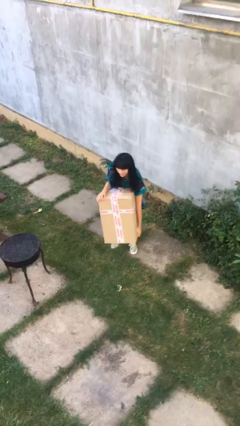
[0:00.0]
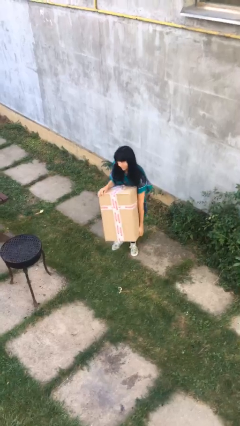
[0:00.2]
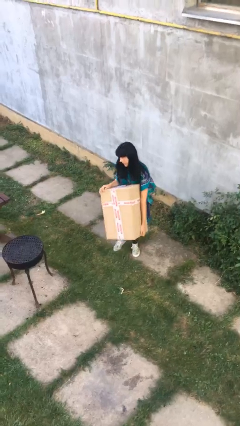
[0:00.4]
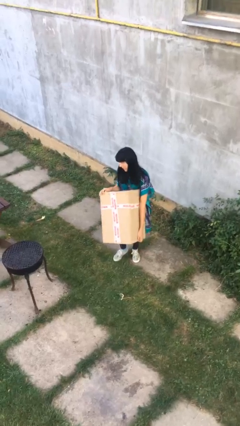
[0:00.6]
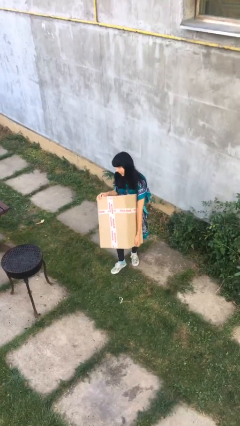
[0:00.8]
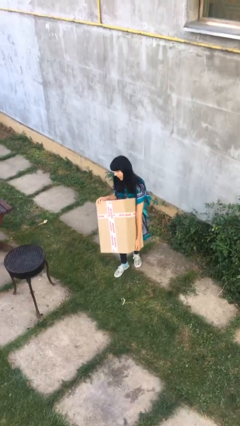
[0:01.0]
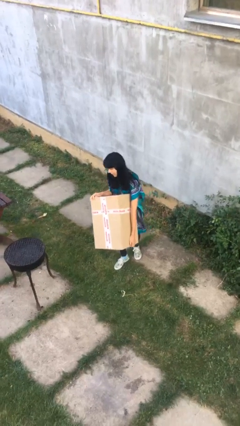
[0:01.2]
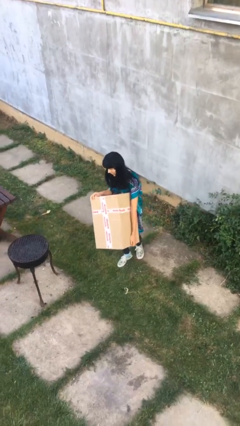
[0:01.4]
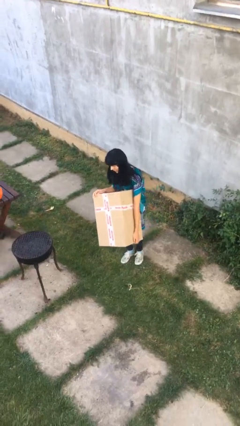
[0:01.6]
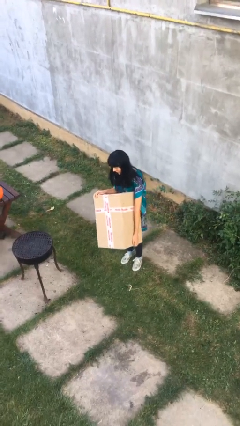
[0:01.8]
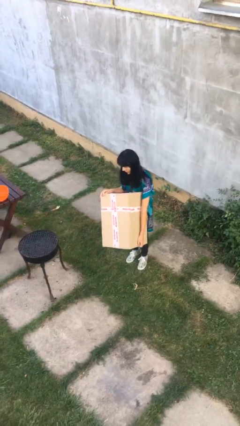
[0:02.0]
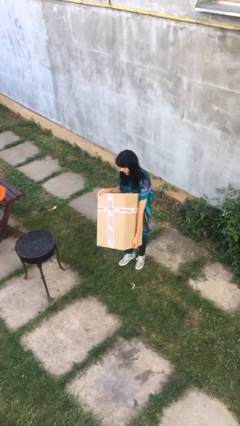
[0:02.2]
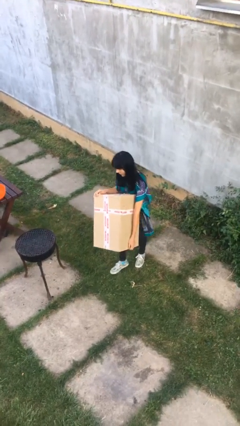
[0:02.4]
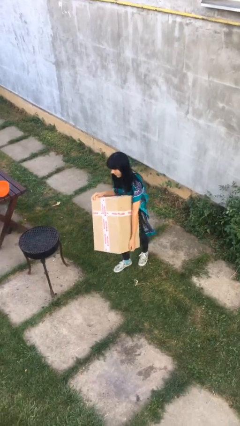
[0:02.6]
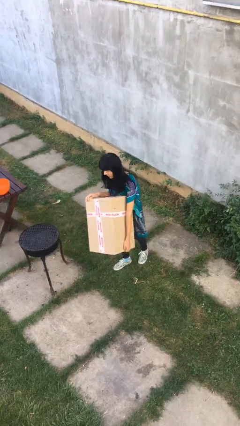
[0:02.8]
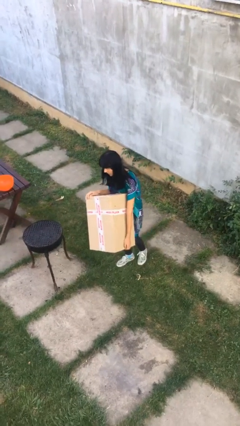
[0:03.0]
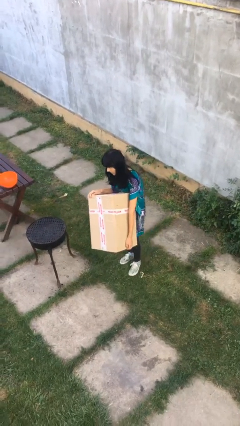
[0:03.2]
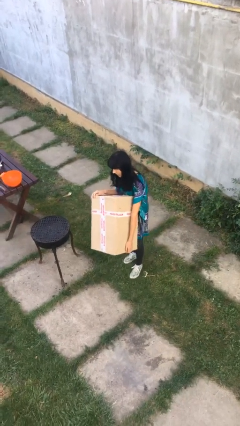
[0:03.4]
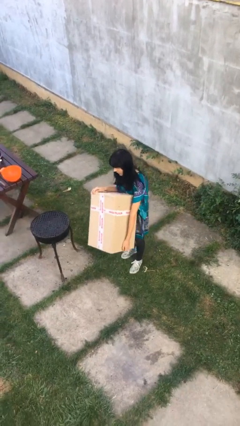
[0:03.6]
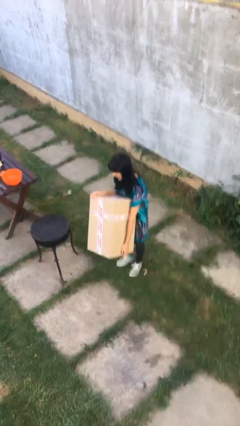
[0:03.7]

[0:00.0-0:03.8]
person carries heavy object

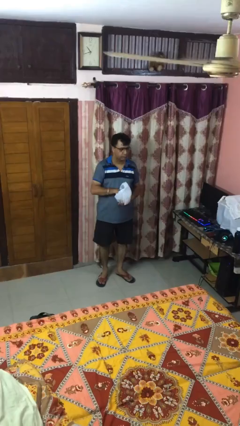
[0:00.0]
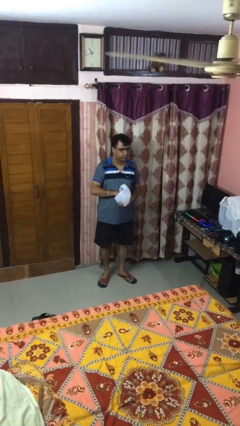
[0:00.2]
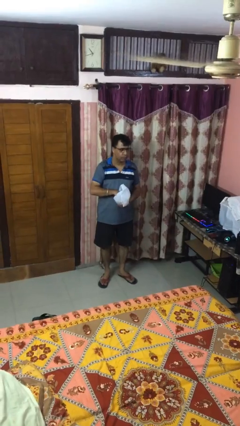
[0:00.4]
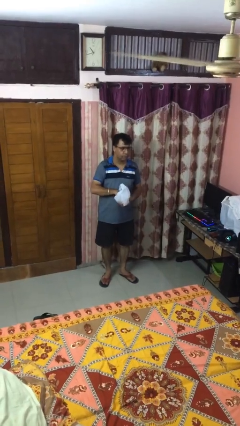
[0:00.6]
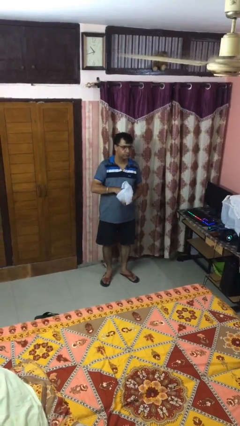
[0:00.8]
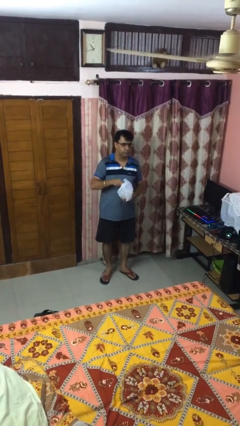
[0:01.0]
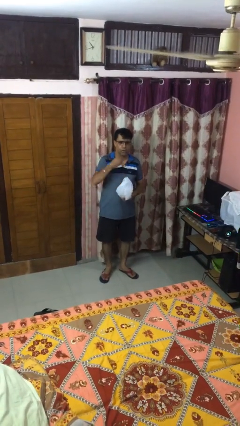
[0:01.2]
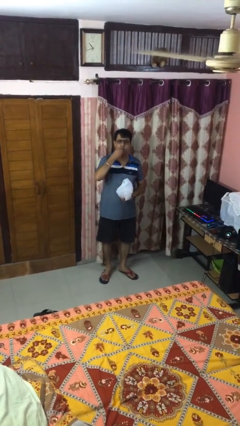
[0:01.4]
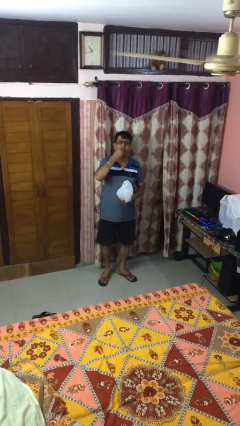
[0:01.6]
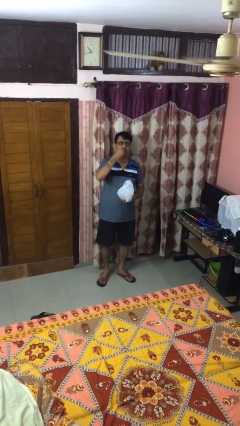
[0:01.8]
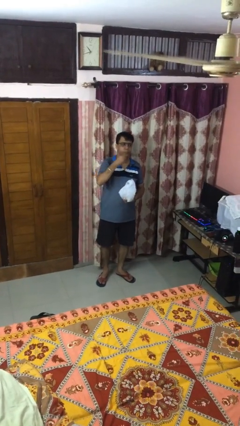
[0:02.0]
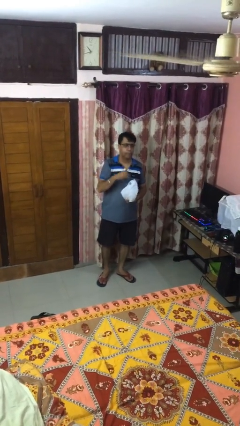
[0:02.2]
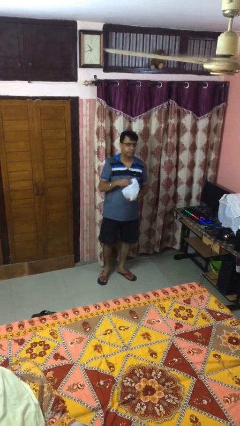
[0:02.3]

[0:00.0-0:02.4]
person eats snack from bag

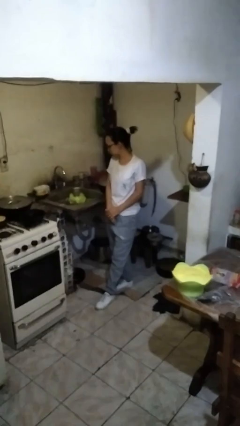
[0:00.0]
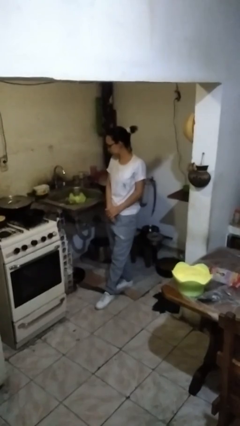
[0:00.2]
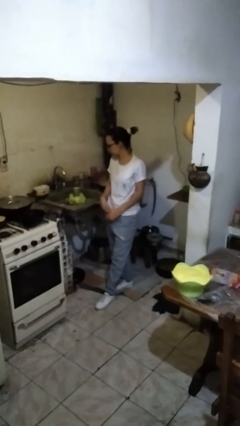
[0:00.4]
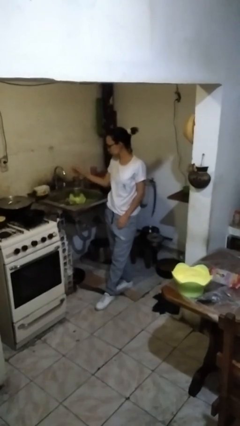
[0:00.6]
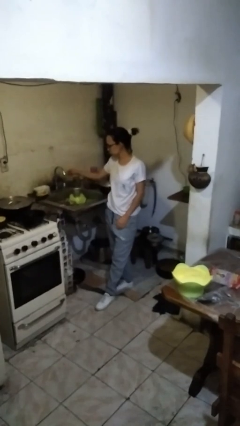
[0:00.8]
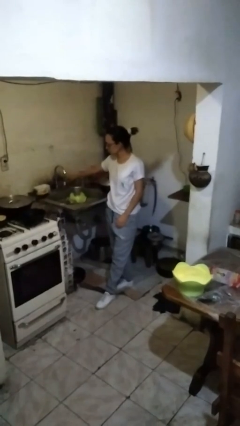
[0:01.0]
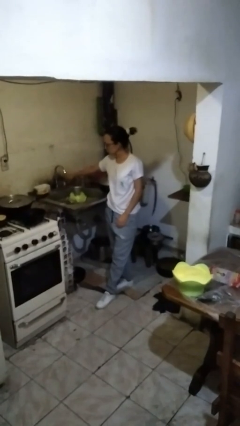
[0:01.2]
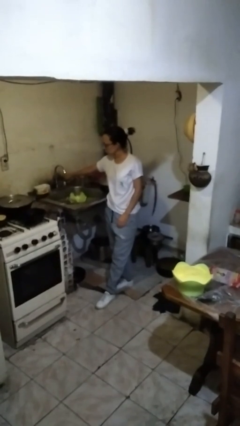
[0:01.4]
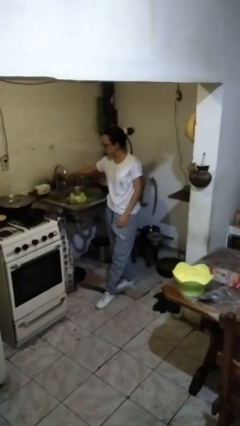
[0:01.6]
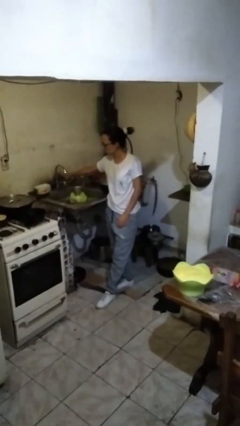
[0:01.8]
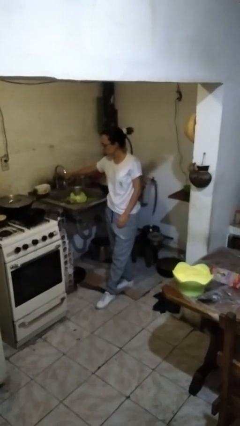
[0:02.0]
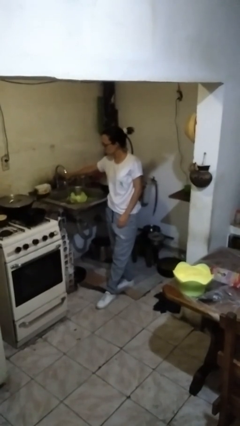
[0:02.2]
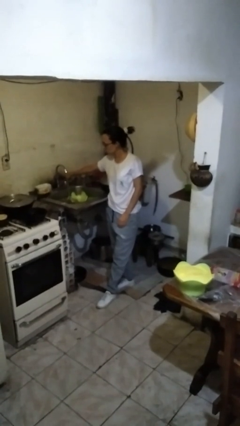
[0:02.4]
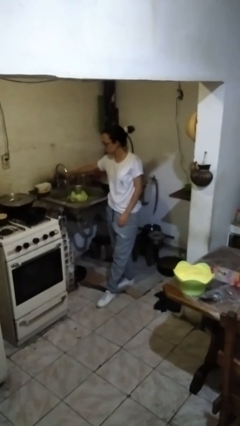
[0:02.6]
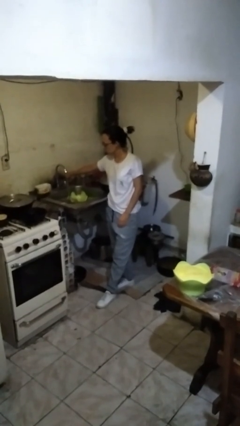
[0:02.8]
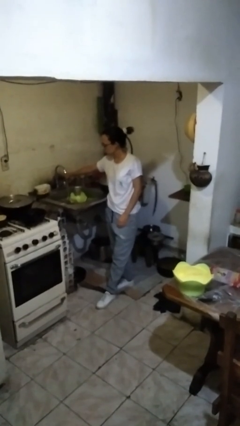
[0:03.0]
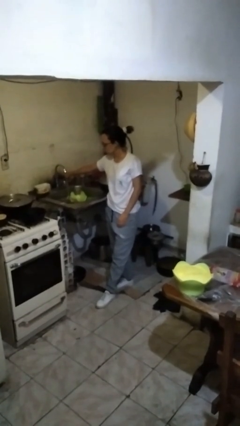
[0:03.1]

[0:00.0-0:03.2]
person turns on faucet

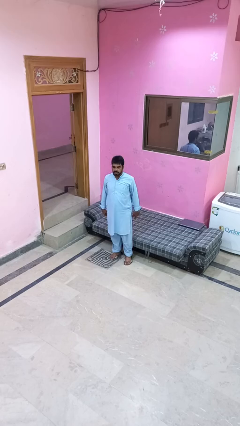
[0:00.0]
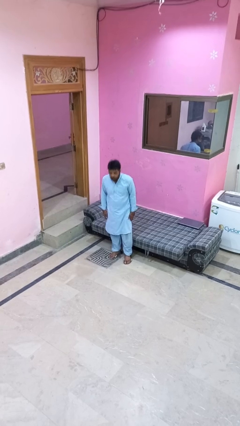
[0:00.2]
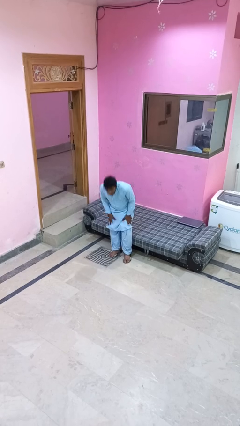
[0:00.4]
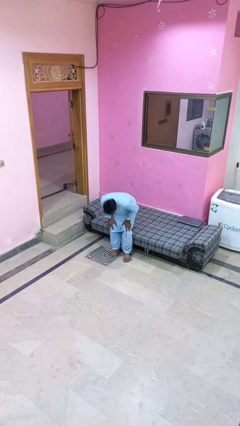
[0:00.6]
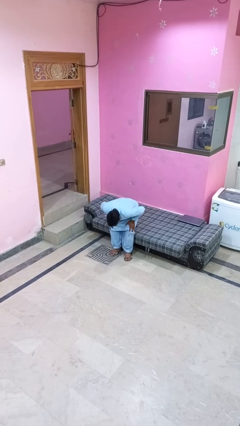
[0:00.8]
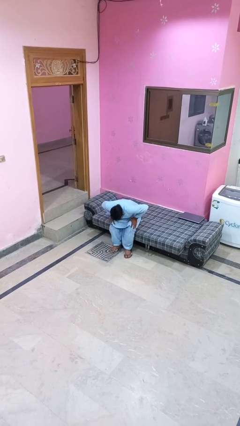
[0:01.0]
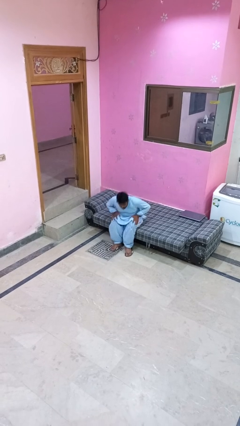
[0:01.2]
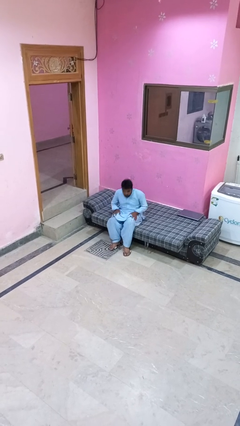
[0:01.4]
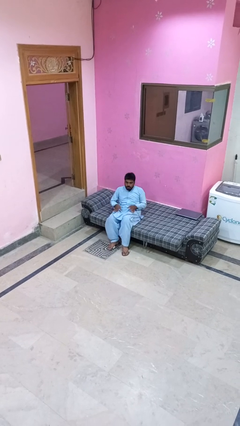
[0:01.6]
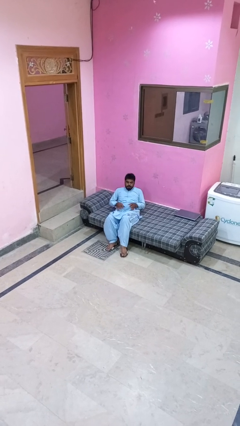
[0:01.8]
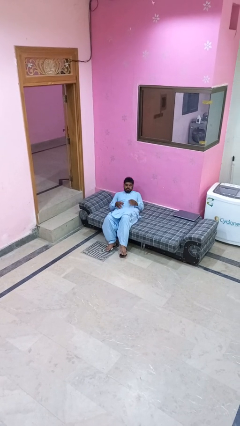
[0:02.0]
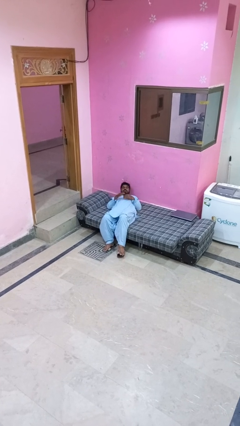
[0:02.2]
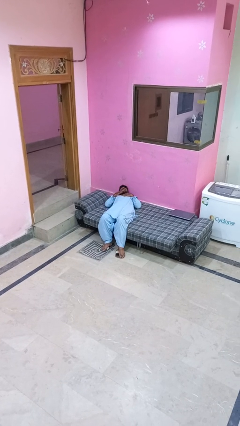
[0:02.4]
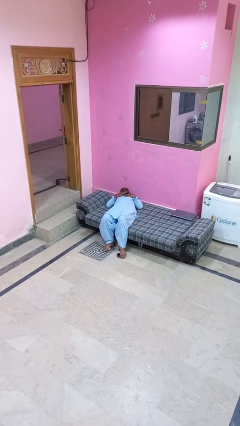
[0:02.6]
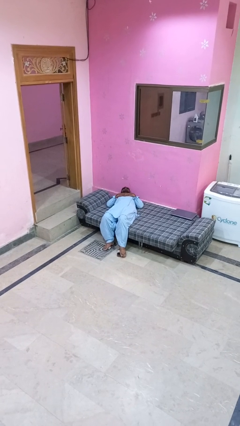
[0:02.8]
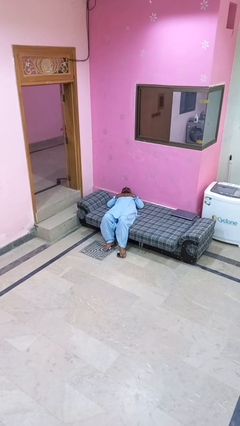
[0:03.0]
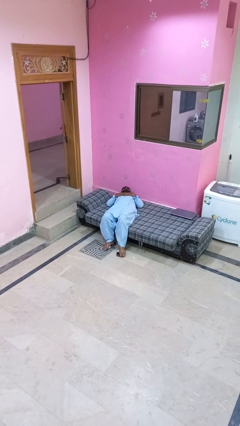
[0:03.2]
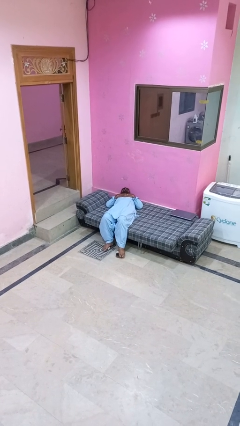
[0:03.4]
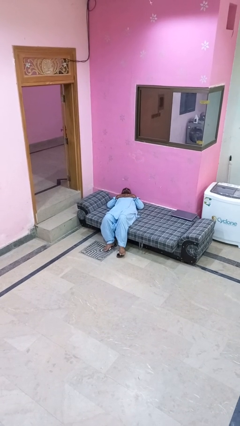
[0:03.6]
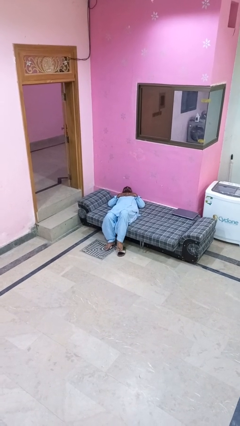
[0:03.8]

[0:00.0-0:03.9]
person lies down on bed

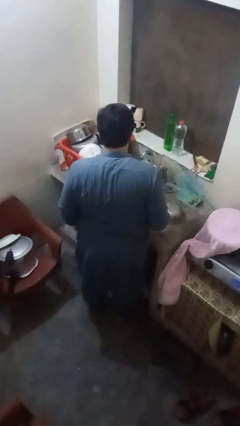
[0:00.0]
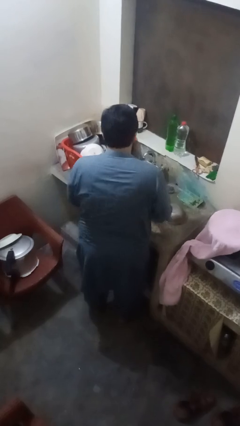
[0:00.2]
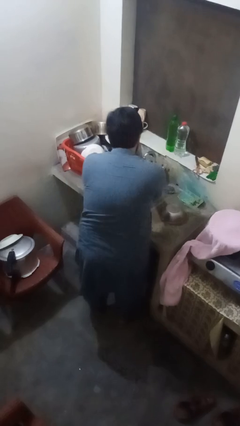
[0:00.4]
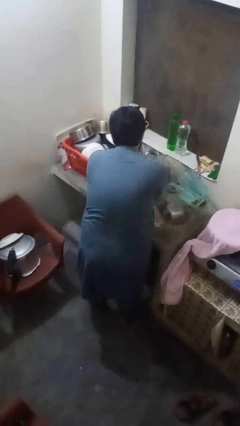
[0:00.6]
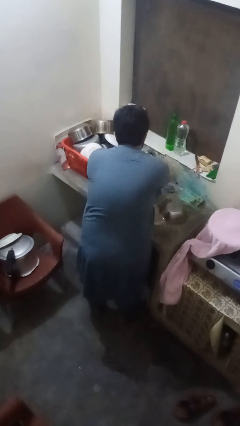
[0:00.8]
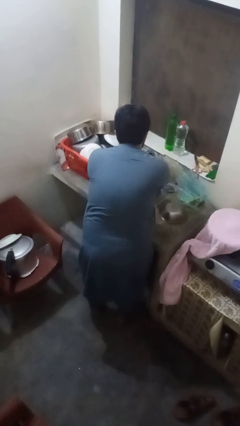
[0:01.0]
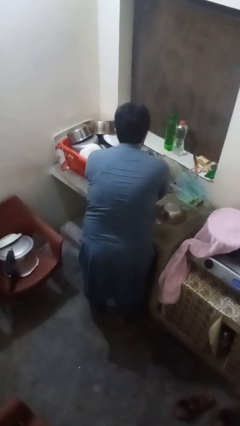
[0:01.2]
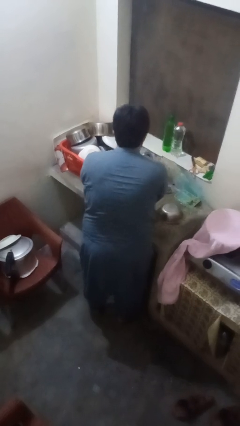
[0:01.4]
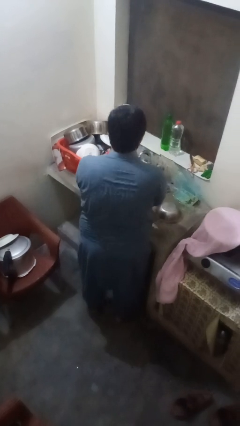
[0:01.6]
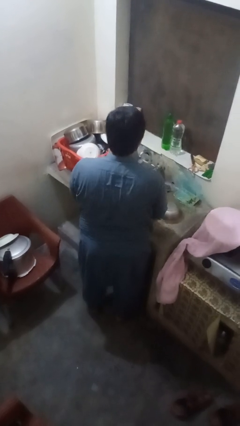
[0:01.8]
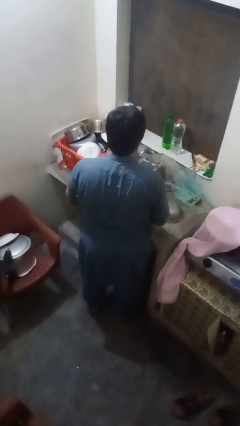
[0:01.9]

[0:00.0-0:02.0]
person washes hands

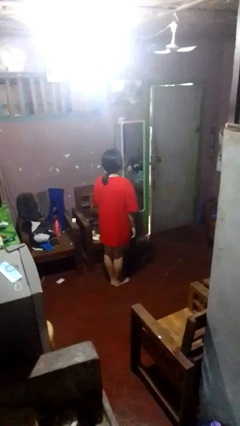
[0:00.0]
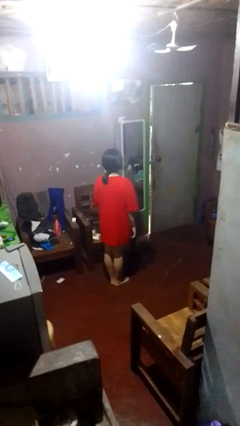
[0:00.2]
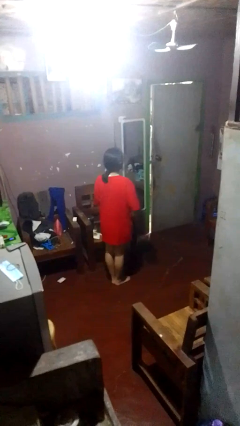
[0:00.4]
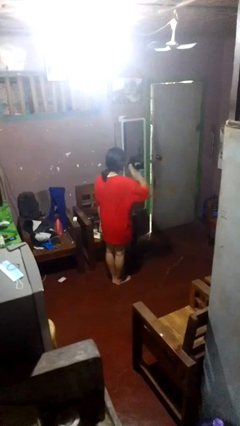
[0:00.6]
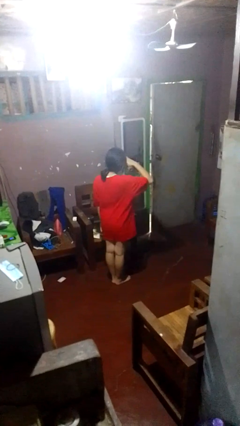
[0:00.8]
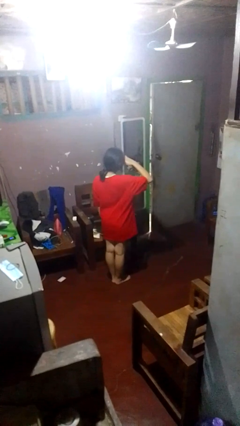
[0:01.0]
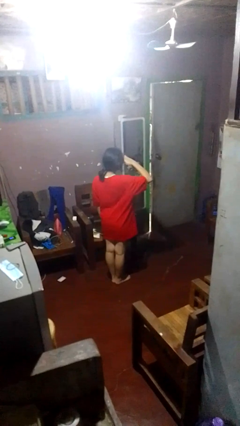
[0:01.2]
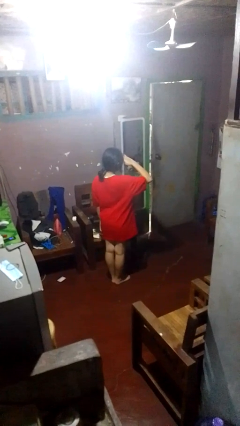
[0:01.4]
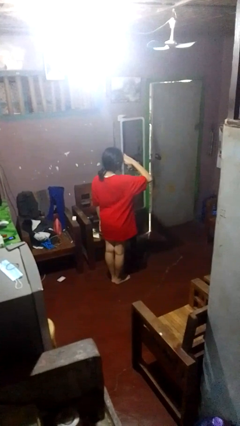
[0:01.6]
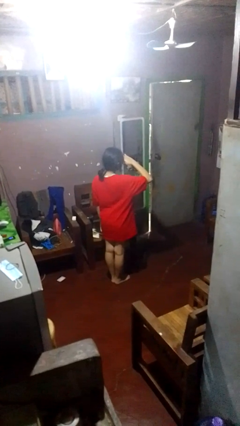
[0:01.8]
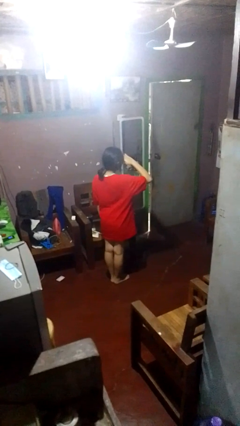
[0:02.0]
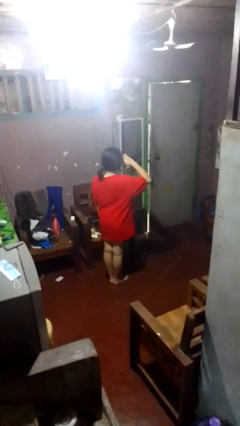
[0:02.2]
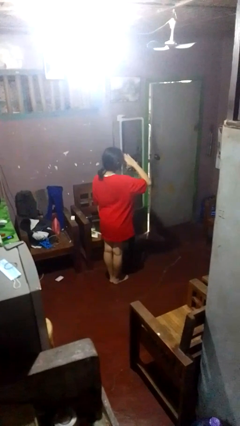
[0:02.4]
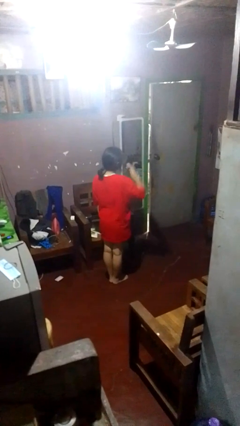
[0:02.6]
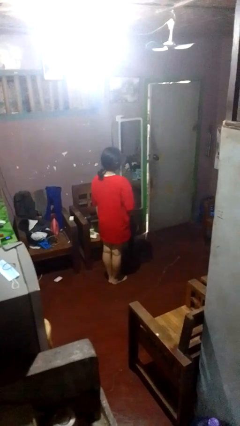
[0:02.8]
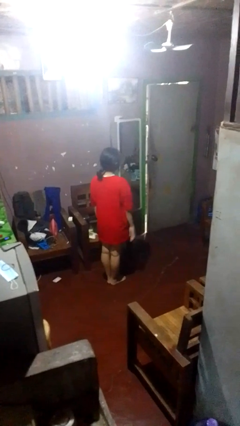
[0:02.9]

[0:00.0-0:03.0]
person salutes
